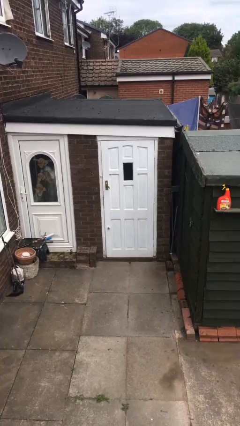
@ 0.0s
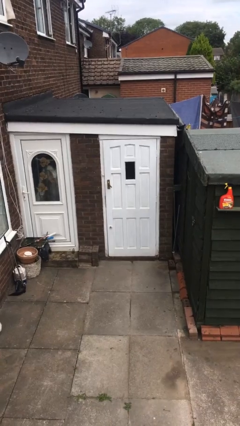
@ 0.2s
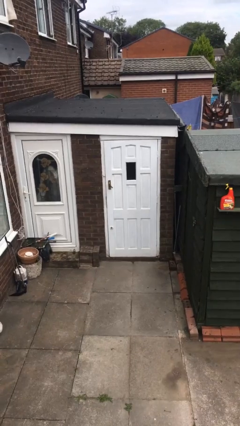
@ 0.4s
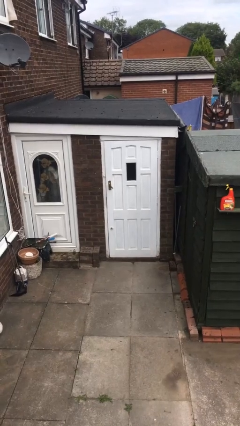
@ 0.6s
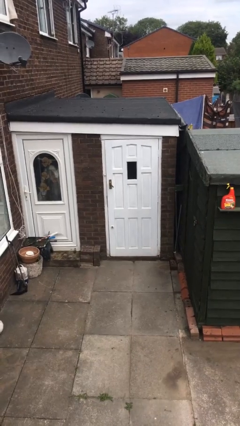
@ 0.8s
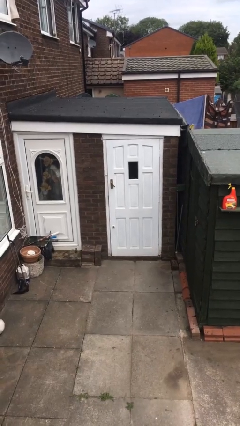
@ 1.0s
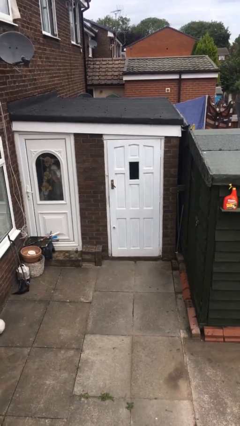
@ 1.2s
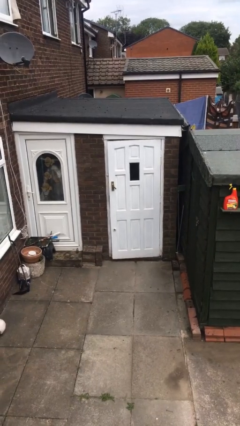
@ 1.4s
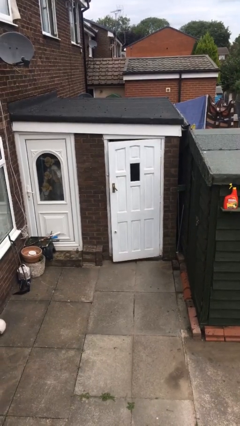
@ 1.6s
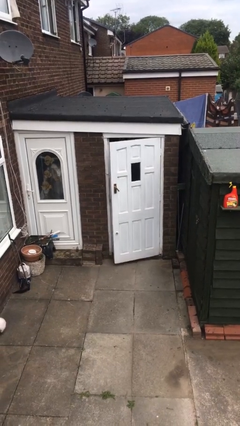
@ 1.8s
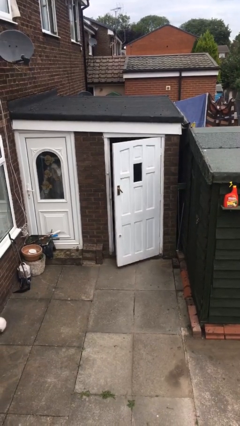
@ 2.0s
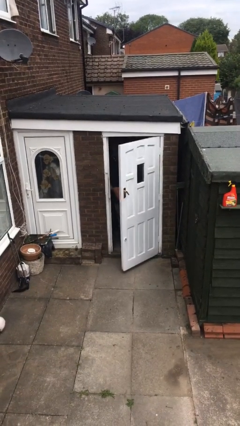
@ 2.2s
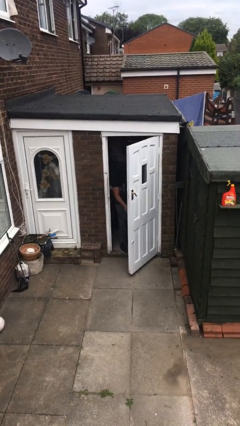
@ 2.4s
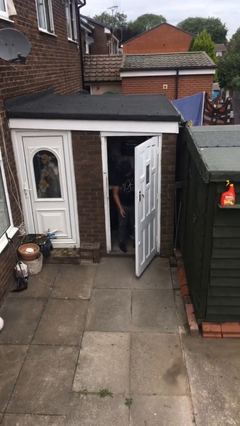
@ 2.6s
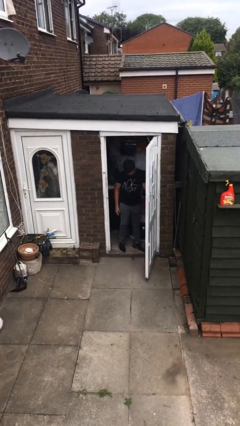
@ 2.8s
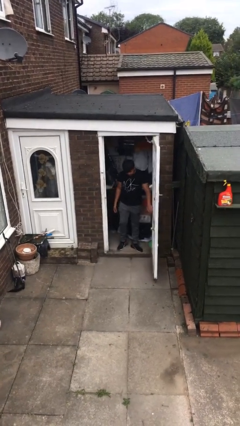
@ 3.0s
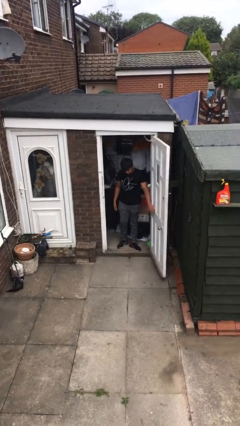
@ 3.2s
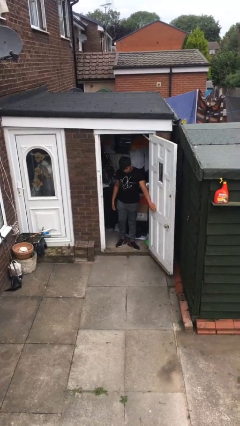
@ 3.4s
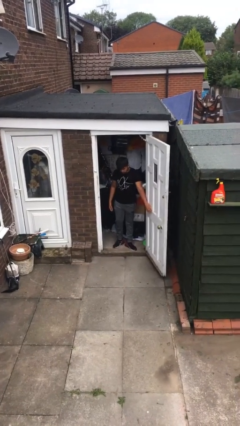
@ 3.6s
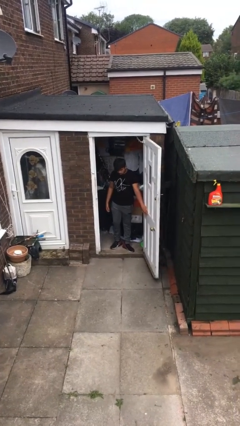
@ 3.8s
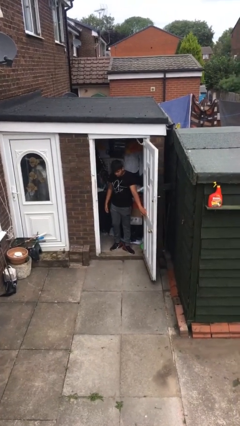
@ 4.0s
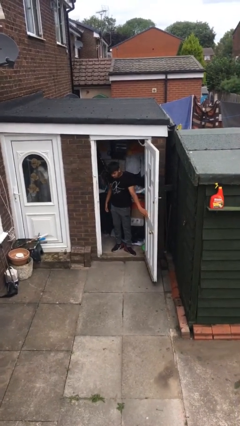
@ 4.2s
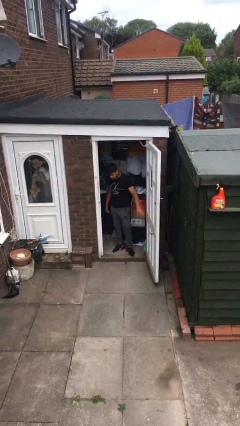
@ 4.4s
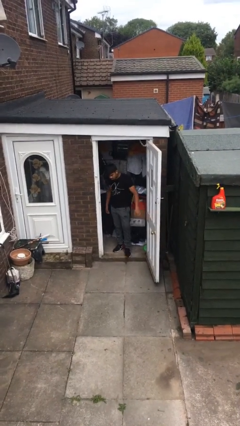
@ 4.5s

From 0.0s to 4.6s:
person opens facility door

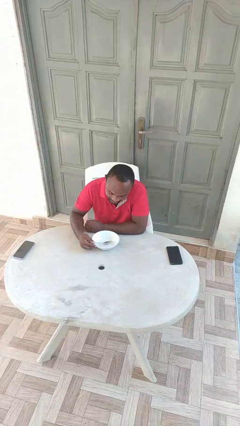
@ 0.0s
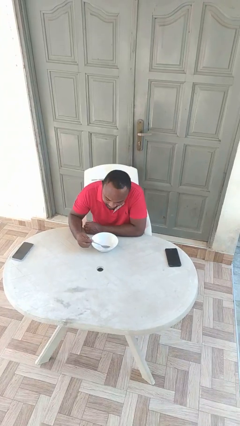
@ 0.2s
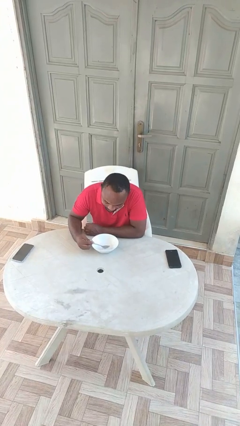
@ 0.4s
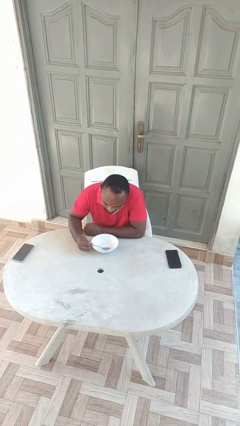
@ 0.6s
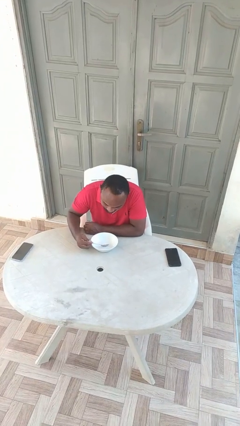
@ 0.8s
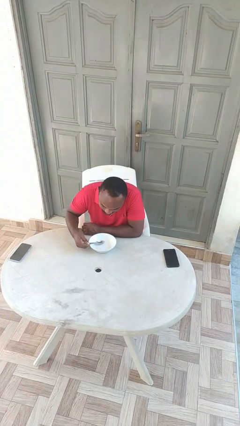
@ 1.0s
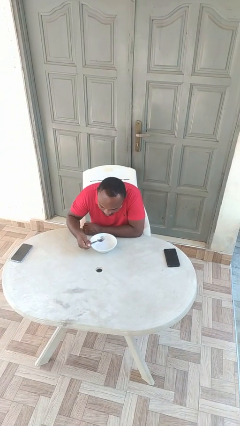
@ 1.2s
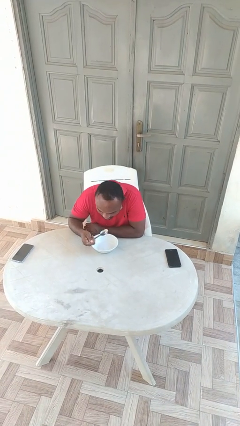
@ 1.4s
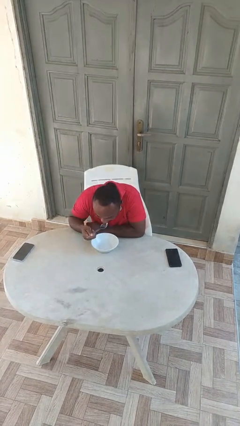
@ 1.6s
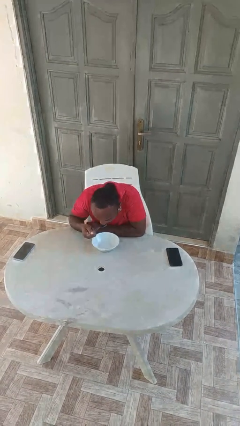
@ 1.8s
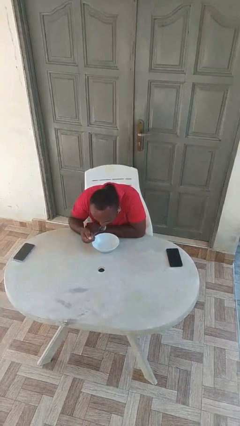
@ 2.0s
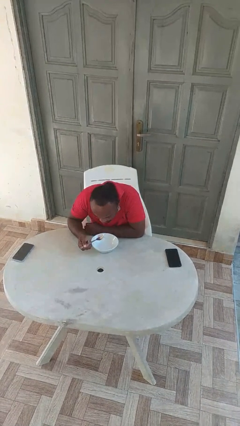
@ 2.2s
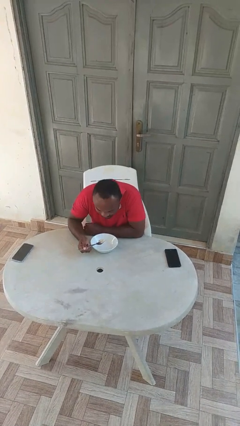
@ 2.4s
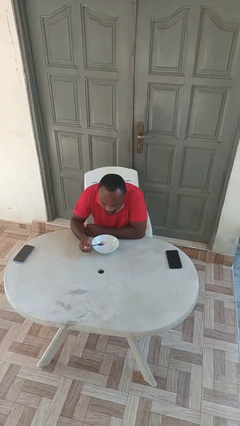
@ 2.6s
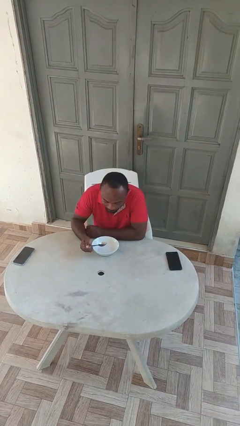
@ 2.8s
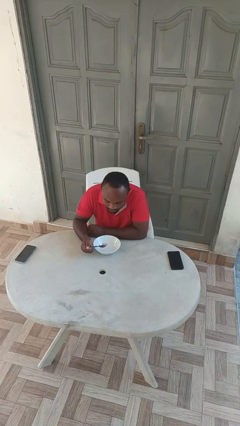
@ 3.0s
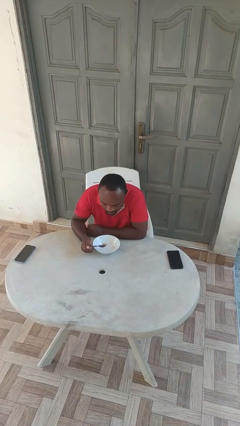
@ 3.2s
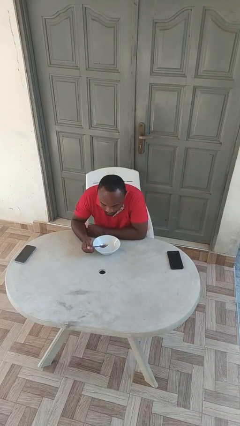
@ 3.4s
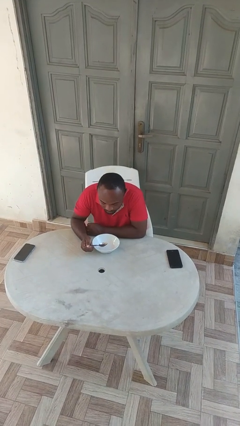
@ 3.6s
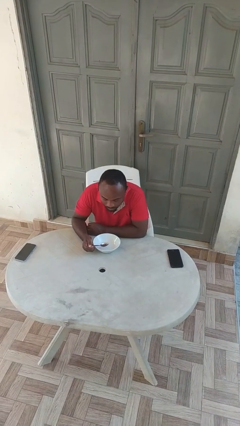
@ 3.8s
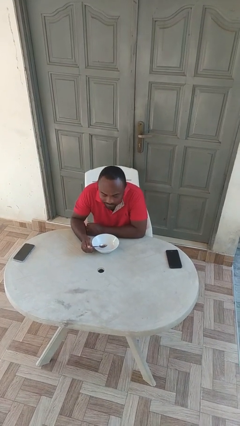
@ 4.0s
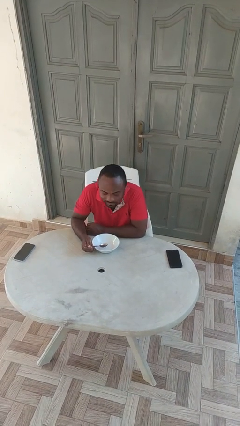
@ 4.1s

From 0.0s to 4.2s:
person eats with utensil

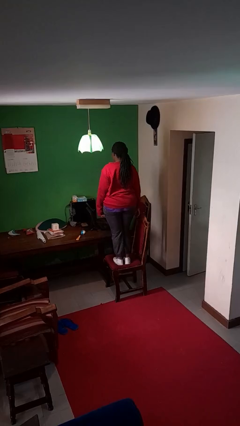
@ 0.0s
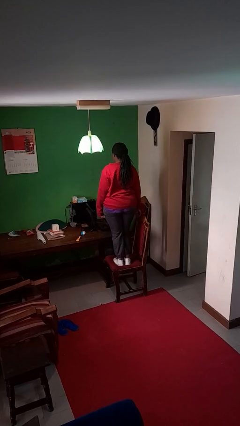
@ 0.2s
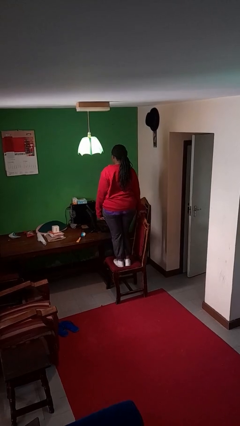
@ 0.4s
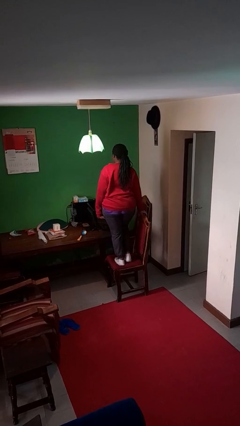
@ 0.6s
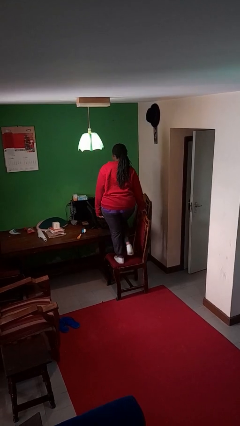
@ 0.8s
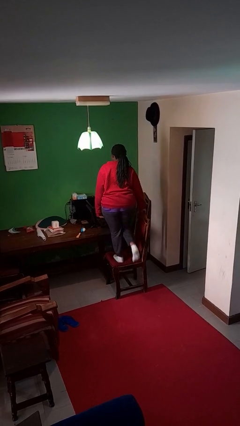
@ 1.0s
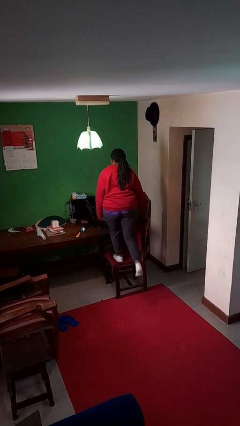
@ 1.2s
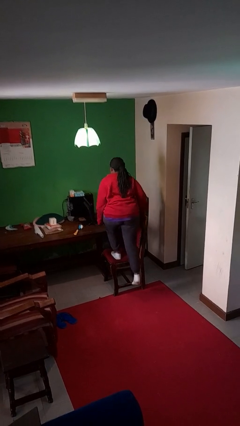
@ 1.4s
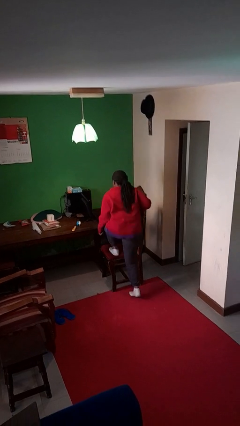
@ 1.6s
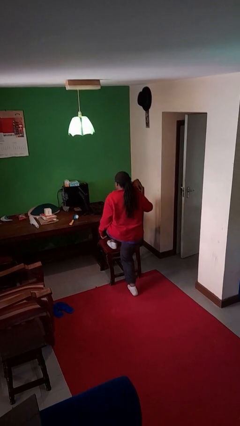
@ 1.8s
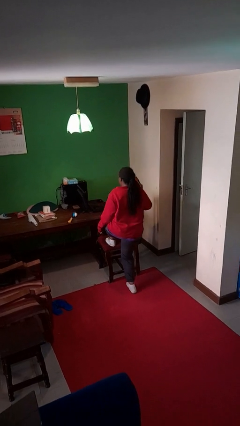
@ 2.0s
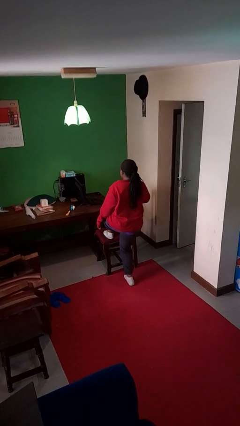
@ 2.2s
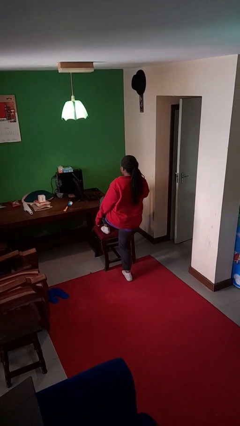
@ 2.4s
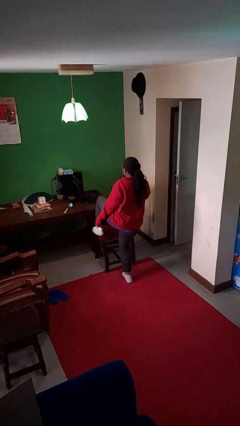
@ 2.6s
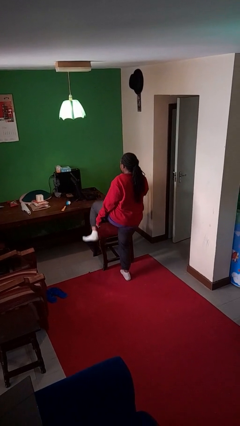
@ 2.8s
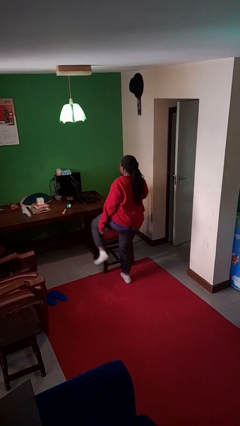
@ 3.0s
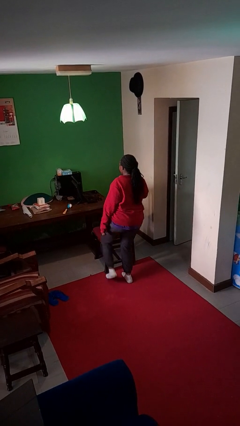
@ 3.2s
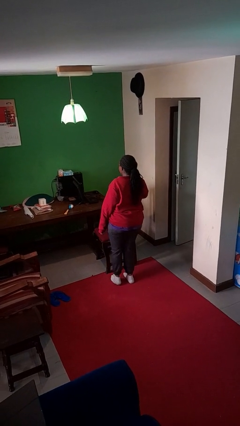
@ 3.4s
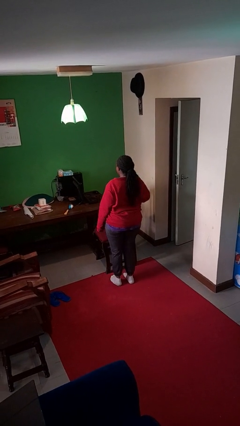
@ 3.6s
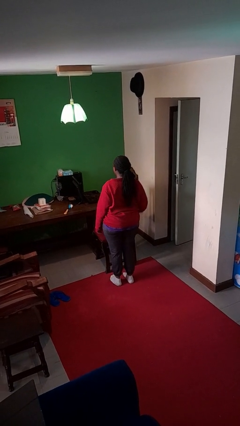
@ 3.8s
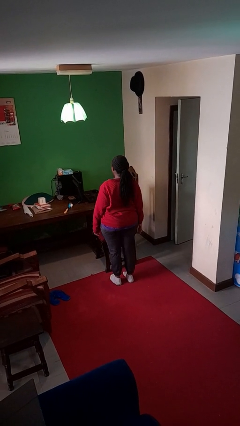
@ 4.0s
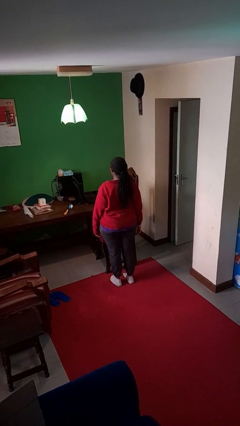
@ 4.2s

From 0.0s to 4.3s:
person climbs off chair

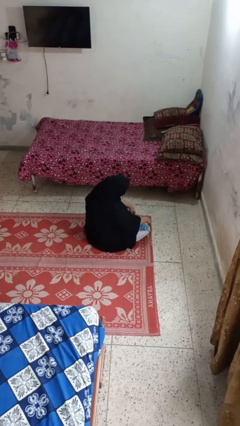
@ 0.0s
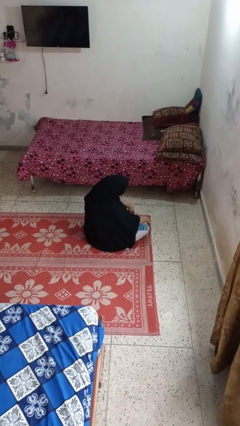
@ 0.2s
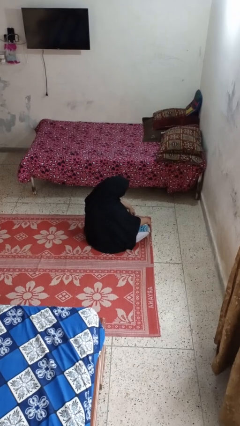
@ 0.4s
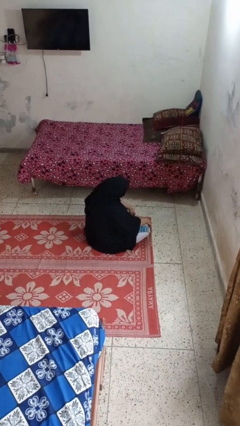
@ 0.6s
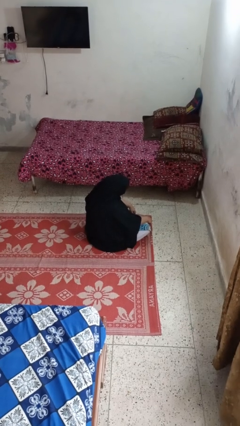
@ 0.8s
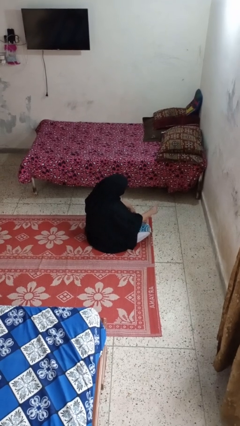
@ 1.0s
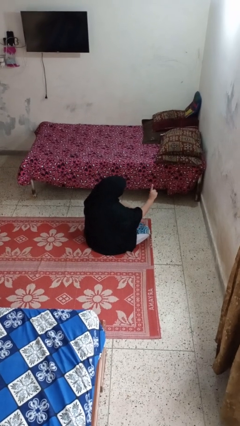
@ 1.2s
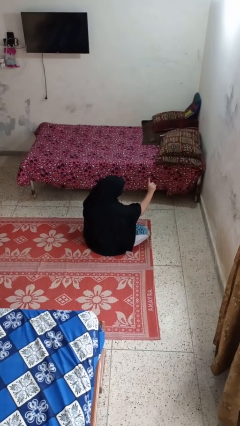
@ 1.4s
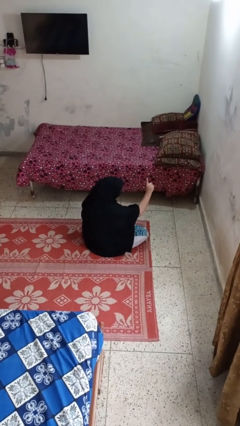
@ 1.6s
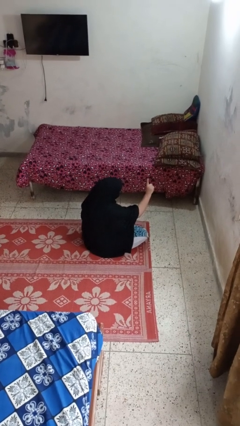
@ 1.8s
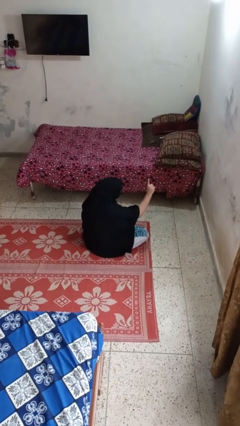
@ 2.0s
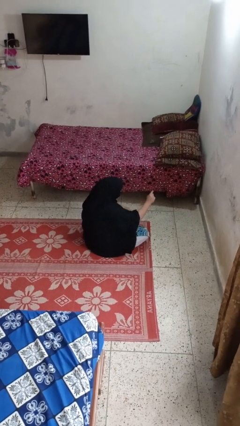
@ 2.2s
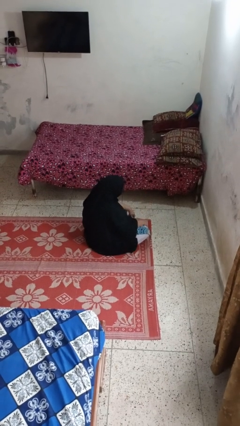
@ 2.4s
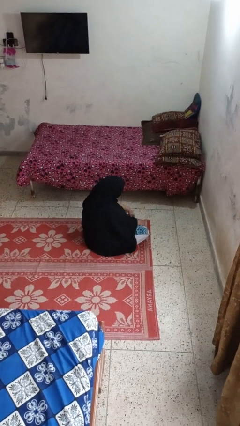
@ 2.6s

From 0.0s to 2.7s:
person gestures number one

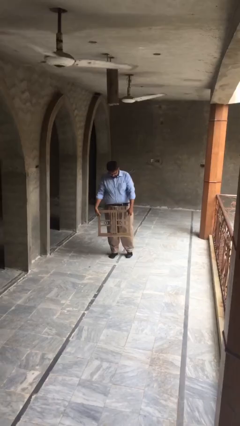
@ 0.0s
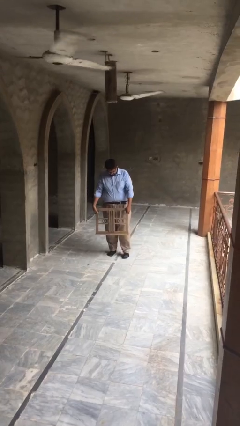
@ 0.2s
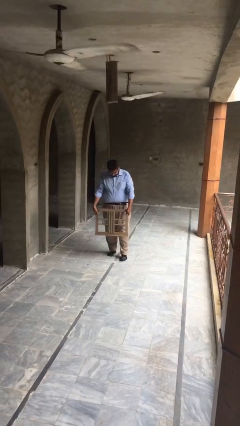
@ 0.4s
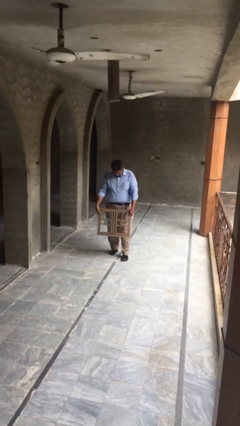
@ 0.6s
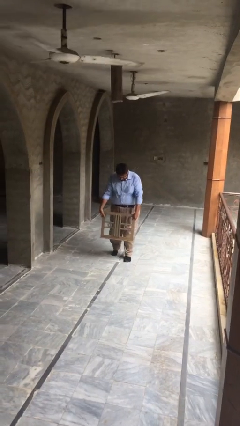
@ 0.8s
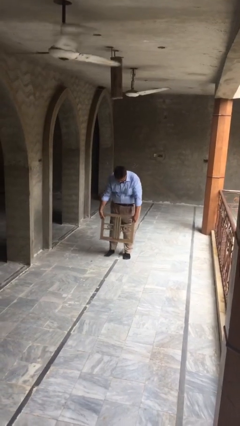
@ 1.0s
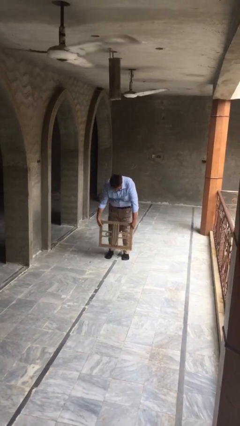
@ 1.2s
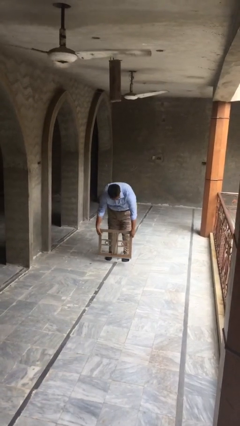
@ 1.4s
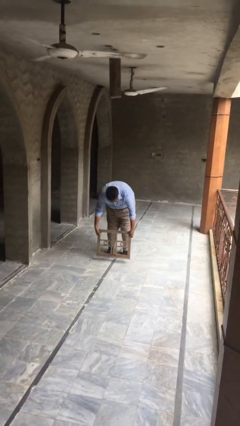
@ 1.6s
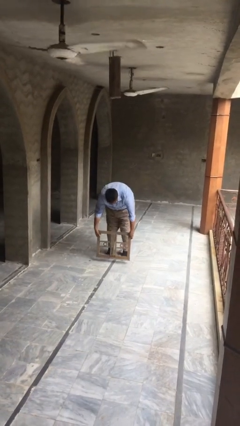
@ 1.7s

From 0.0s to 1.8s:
person puts down object on floor
